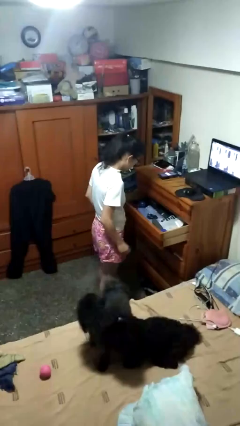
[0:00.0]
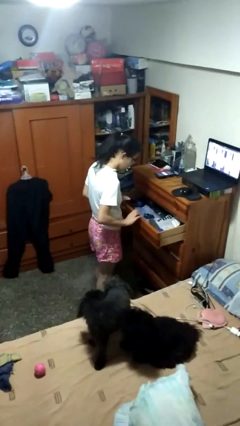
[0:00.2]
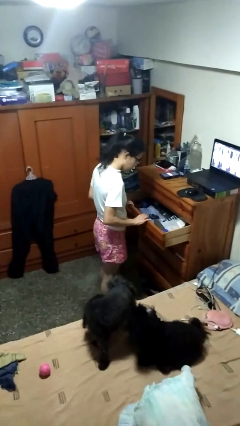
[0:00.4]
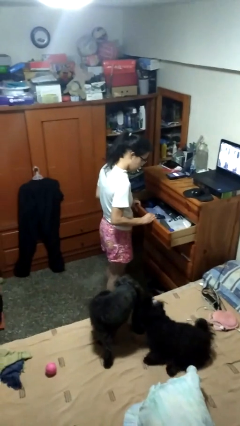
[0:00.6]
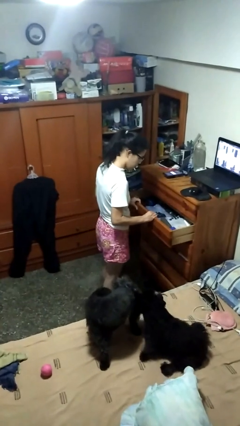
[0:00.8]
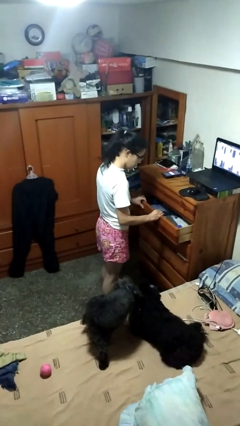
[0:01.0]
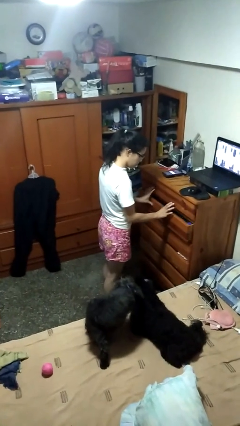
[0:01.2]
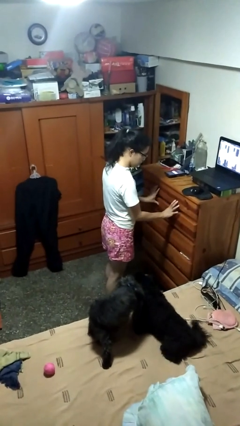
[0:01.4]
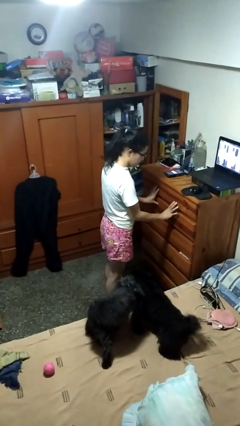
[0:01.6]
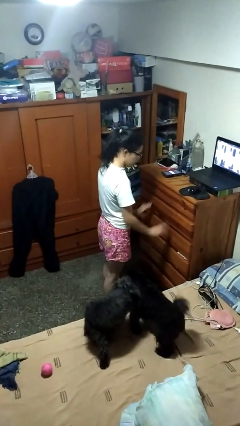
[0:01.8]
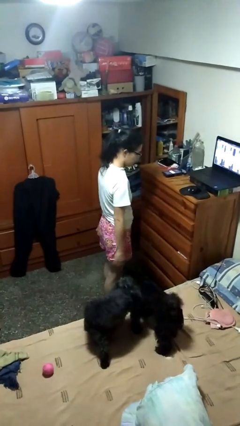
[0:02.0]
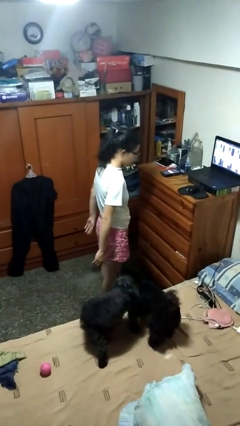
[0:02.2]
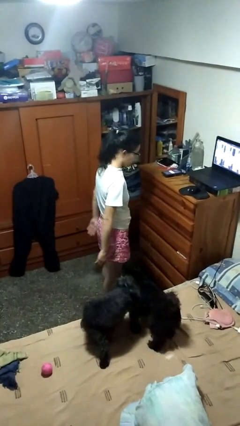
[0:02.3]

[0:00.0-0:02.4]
person closes dresser drawer

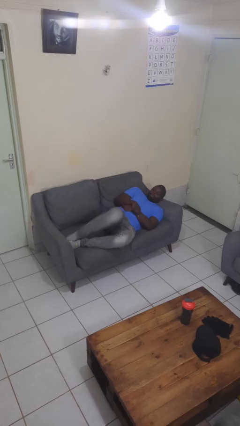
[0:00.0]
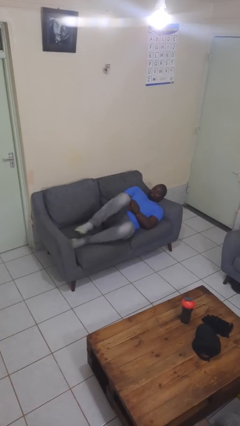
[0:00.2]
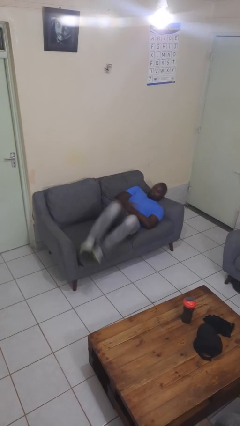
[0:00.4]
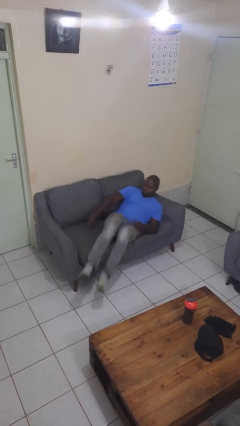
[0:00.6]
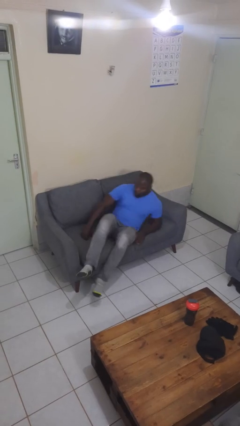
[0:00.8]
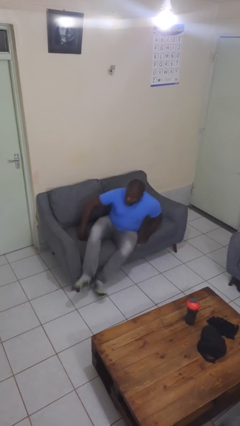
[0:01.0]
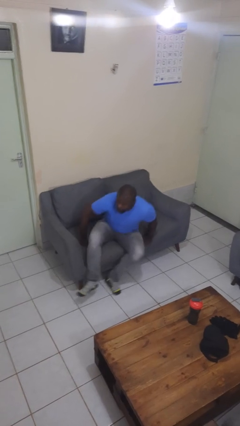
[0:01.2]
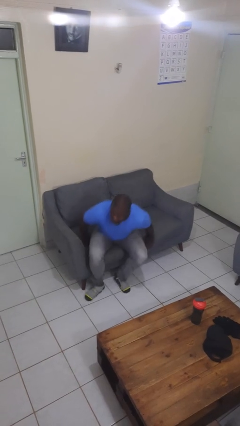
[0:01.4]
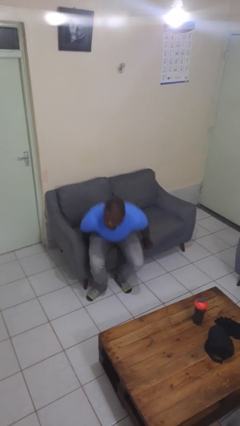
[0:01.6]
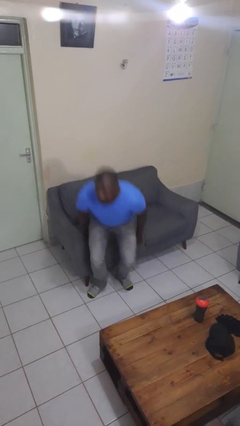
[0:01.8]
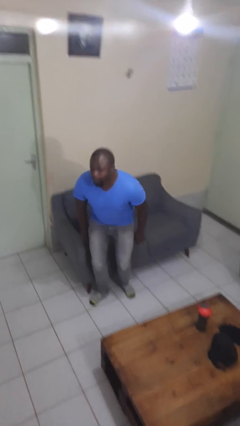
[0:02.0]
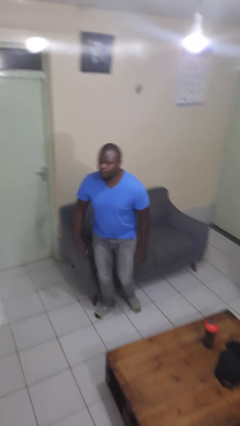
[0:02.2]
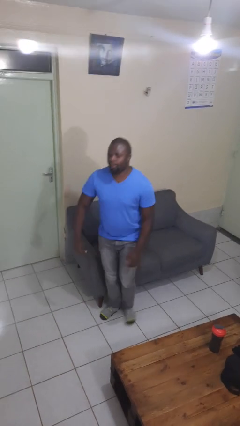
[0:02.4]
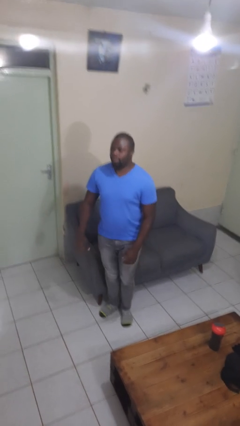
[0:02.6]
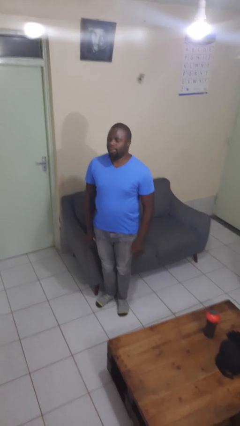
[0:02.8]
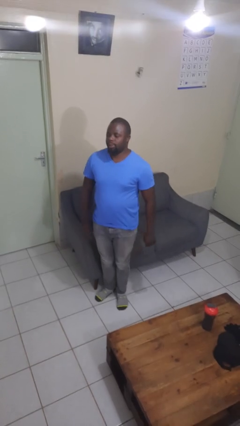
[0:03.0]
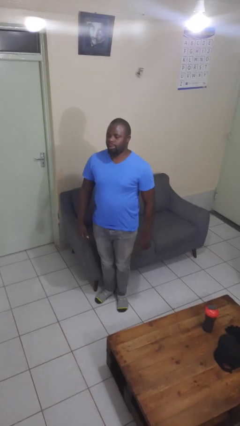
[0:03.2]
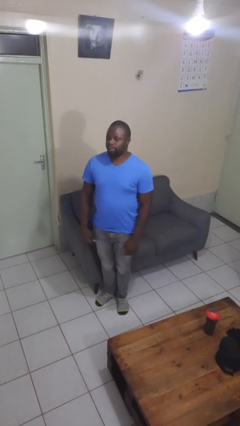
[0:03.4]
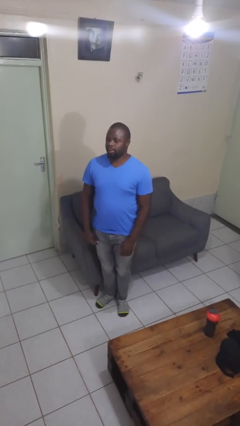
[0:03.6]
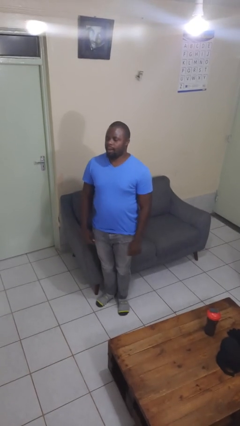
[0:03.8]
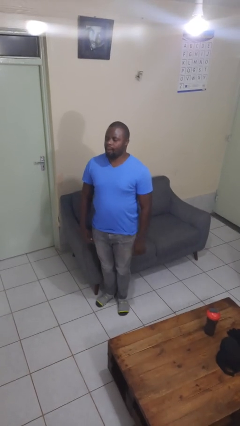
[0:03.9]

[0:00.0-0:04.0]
person stands up

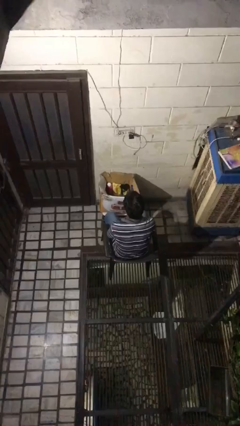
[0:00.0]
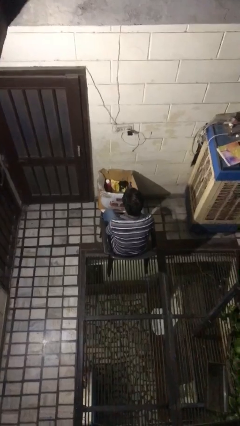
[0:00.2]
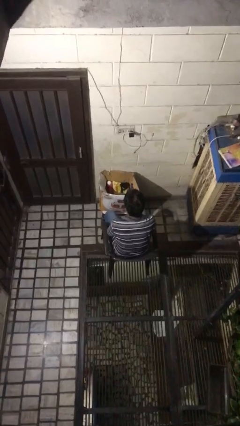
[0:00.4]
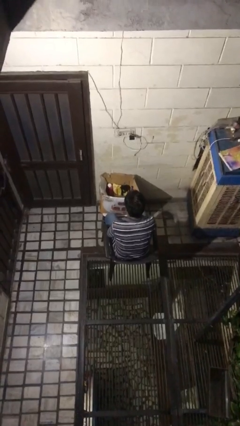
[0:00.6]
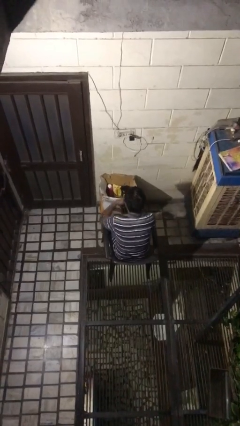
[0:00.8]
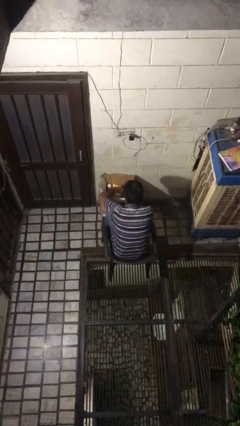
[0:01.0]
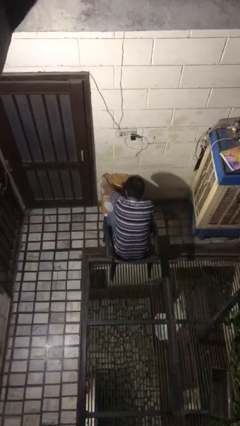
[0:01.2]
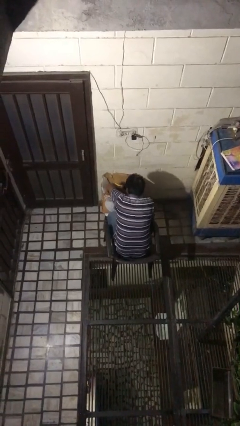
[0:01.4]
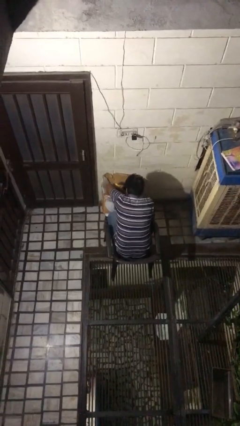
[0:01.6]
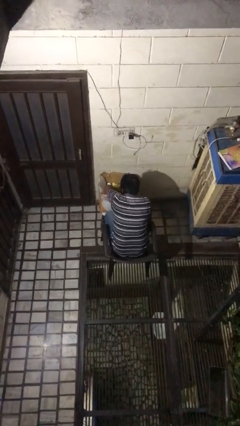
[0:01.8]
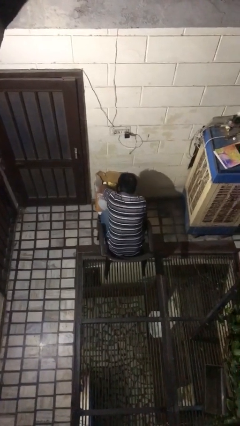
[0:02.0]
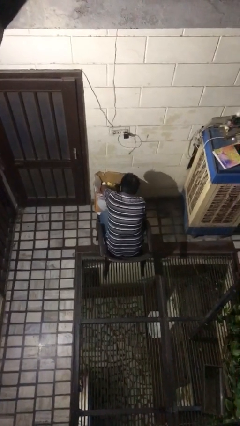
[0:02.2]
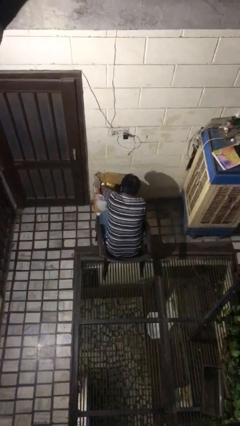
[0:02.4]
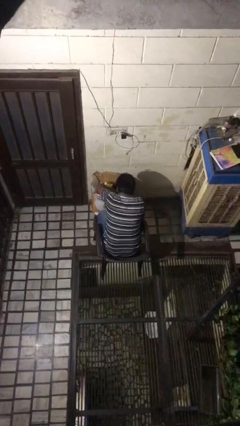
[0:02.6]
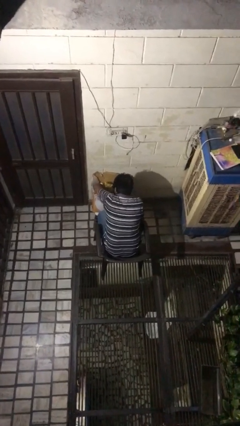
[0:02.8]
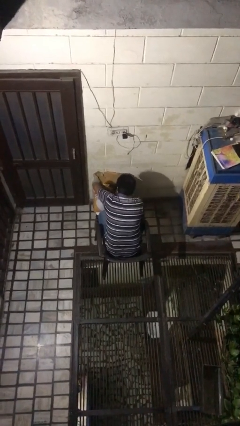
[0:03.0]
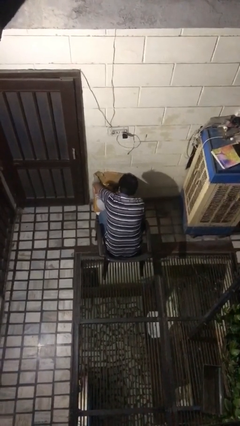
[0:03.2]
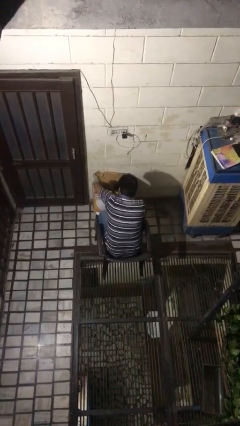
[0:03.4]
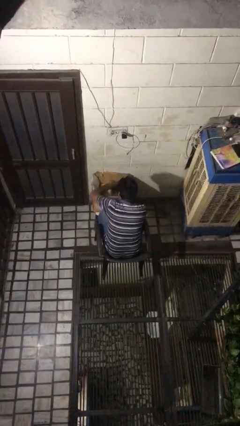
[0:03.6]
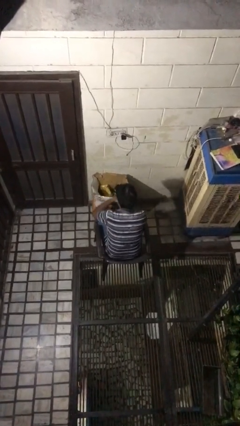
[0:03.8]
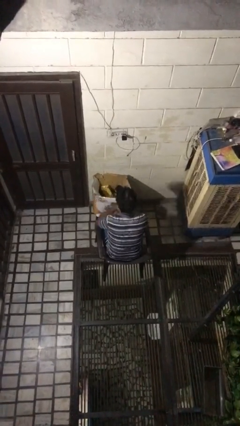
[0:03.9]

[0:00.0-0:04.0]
person searches in box

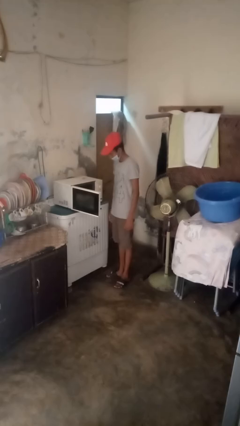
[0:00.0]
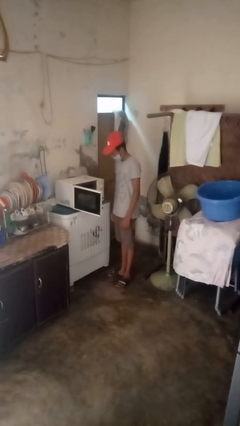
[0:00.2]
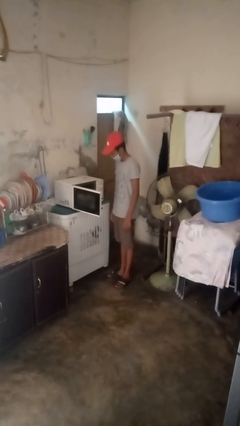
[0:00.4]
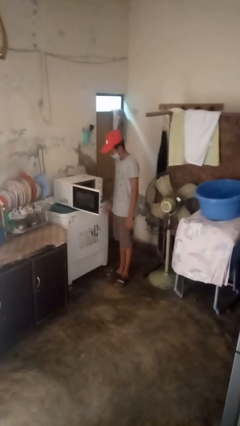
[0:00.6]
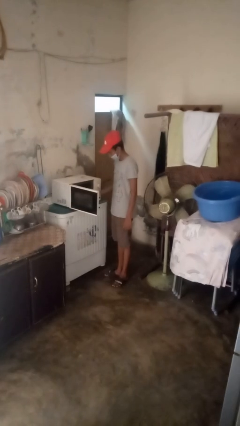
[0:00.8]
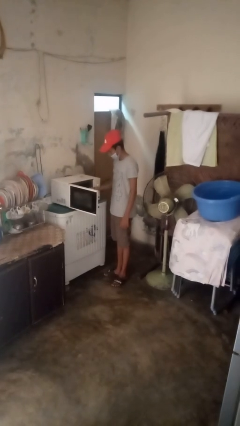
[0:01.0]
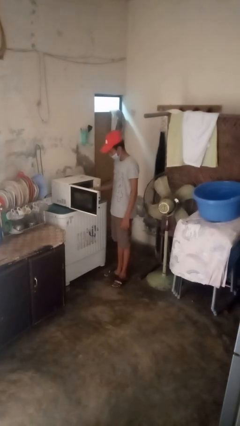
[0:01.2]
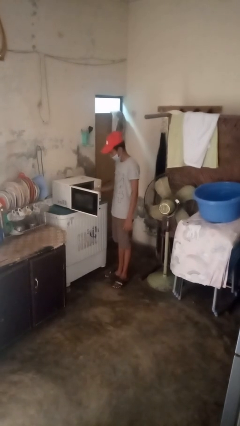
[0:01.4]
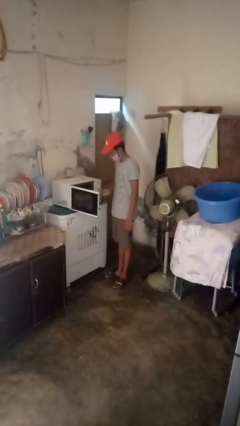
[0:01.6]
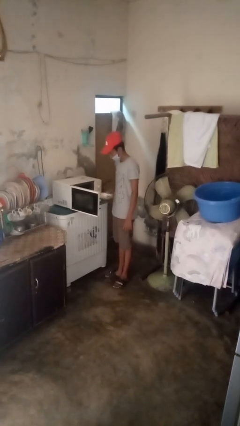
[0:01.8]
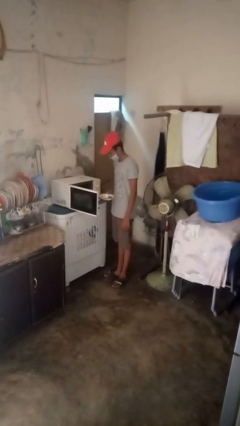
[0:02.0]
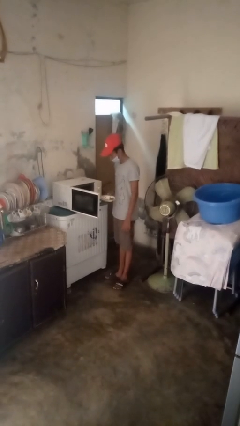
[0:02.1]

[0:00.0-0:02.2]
person takes object from microwave

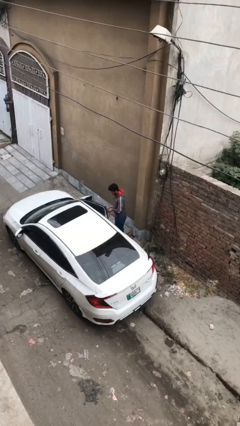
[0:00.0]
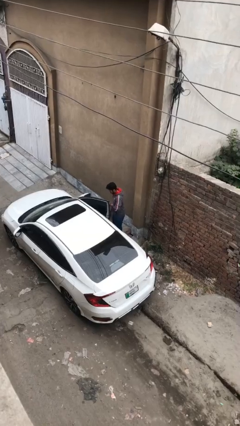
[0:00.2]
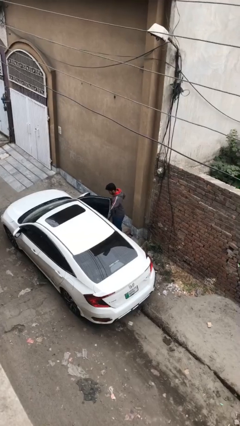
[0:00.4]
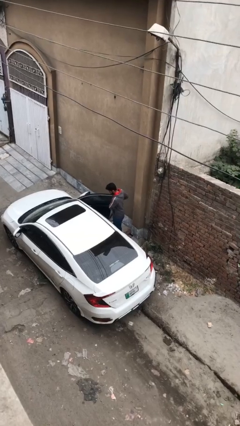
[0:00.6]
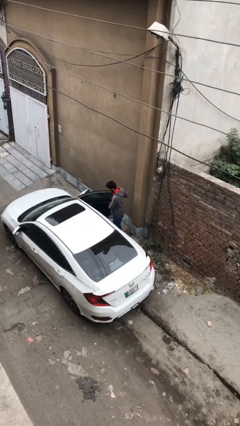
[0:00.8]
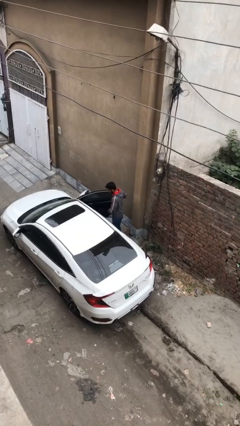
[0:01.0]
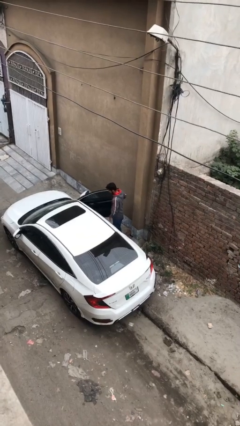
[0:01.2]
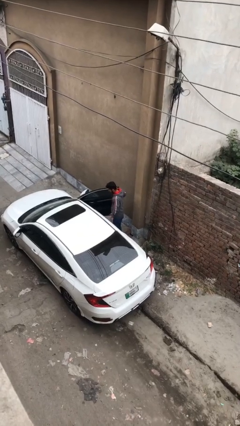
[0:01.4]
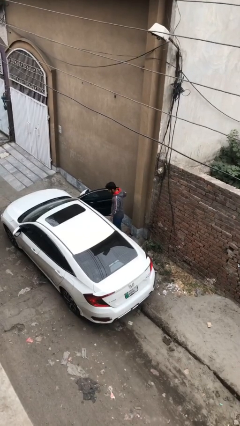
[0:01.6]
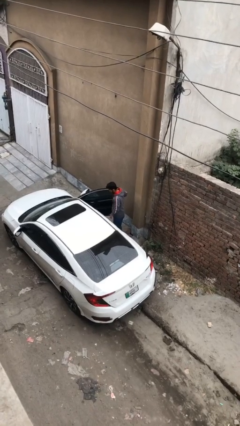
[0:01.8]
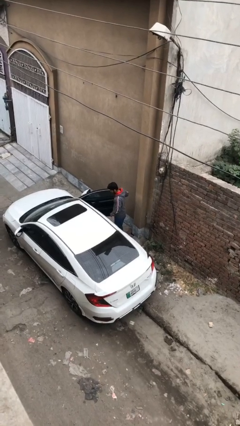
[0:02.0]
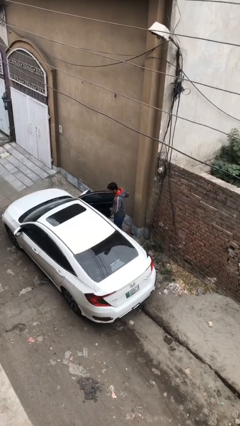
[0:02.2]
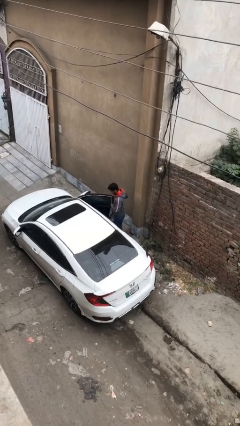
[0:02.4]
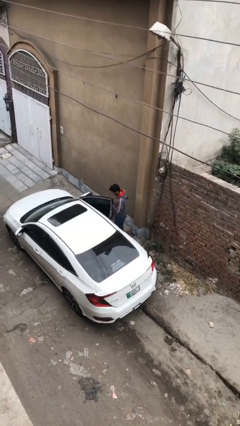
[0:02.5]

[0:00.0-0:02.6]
person opens car door

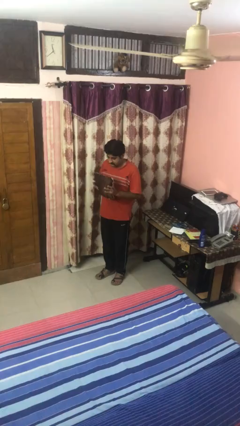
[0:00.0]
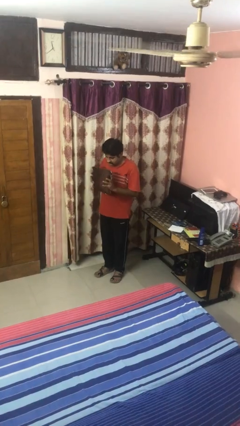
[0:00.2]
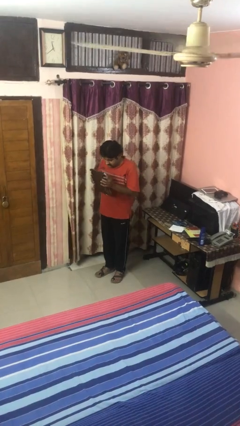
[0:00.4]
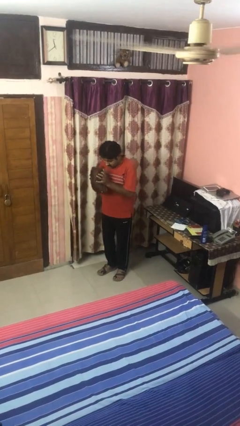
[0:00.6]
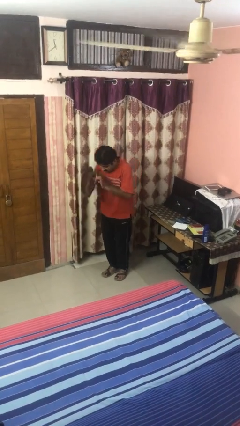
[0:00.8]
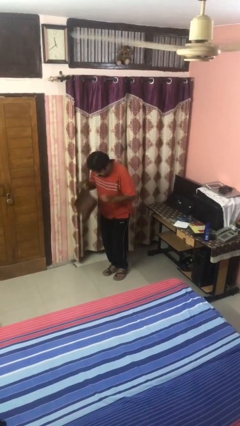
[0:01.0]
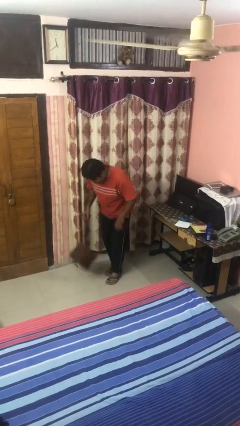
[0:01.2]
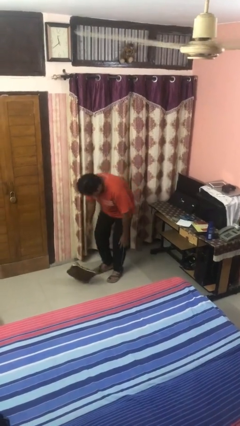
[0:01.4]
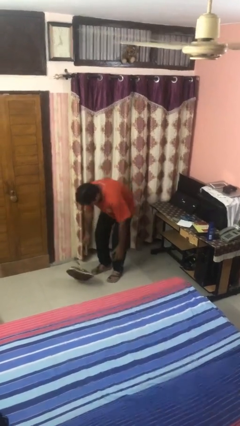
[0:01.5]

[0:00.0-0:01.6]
person drops object

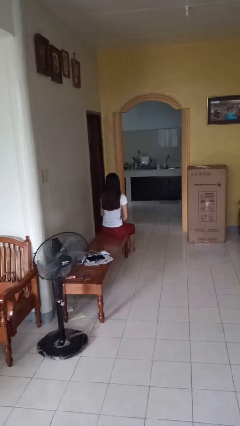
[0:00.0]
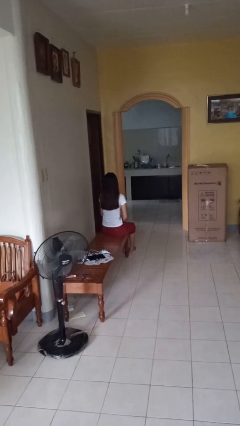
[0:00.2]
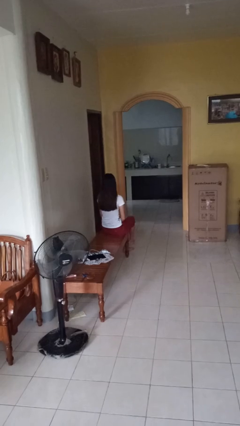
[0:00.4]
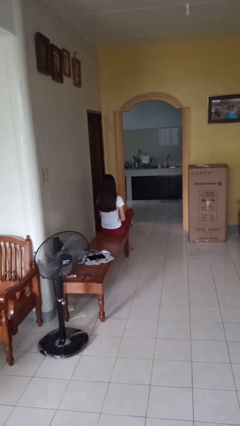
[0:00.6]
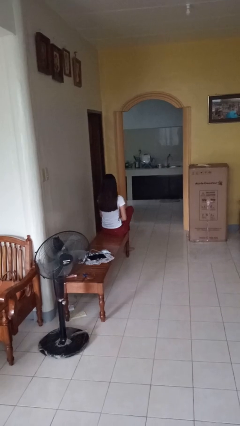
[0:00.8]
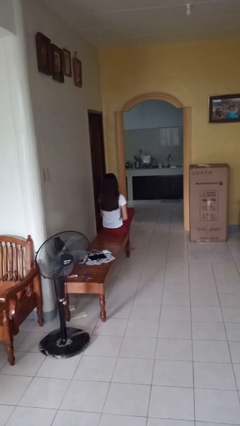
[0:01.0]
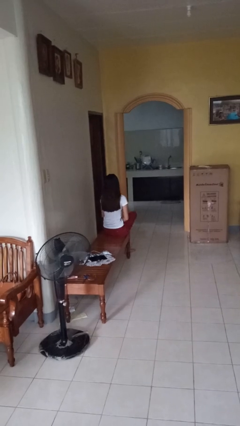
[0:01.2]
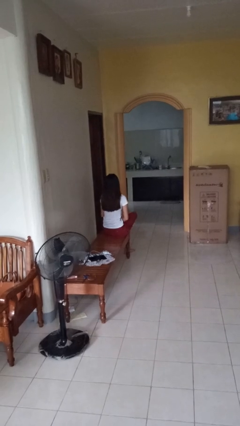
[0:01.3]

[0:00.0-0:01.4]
person crosses legs
